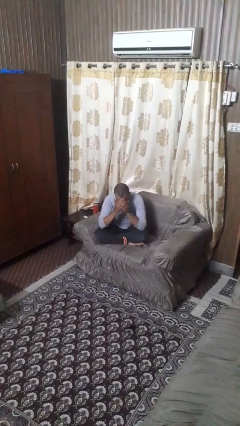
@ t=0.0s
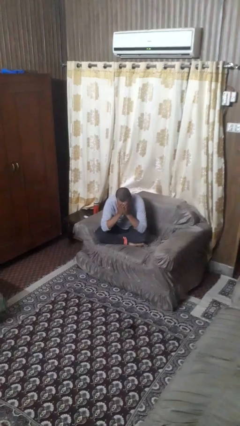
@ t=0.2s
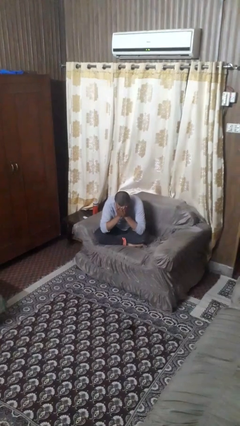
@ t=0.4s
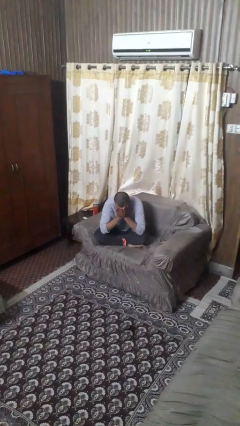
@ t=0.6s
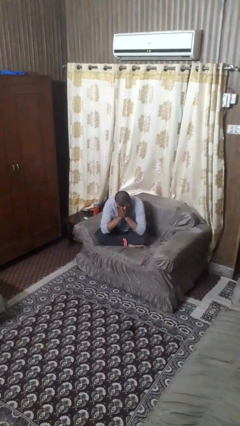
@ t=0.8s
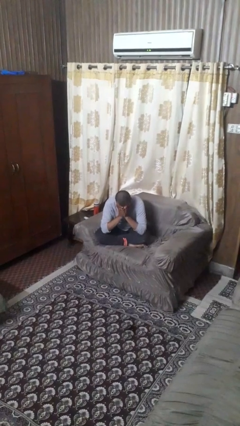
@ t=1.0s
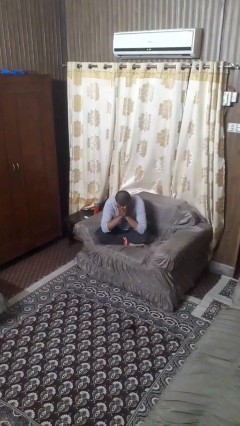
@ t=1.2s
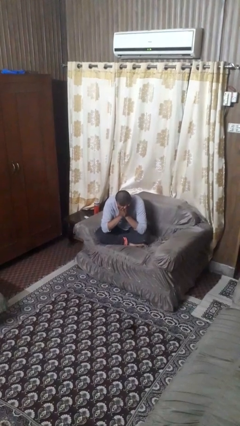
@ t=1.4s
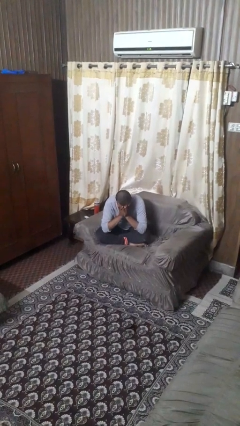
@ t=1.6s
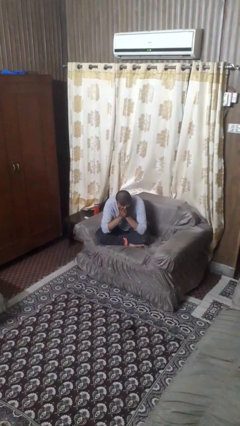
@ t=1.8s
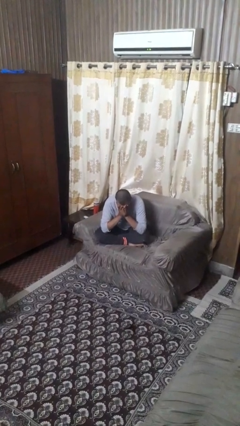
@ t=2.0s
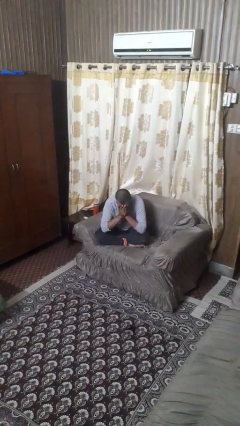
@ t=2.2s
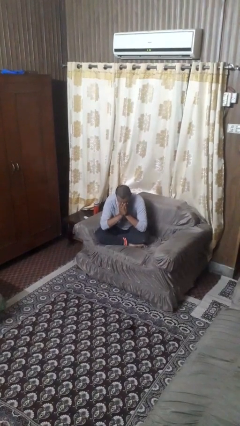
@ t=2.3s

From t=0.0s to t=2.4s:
person covers face with hands

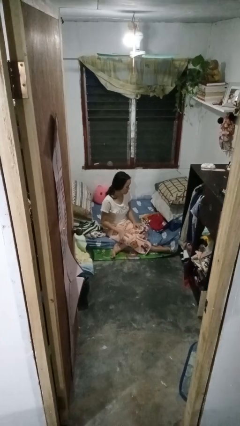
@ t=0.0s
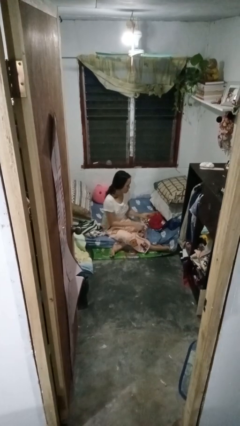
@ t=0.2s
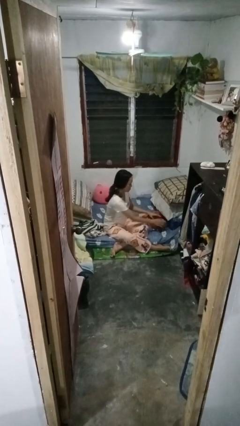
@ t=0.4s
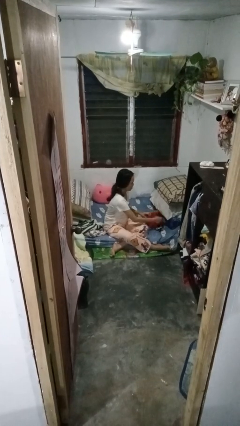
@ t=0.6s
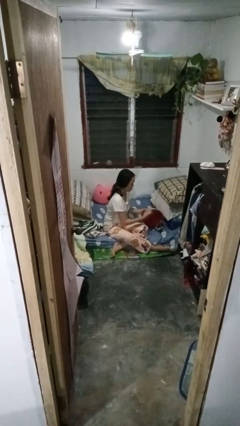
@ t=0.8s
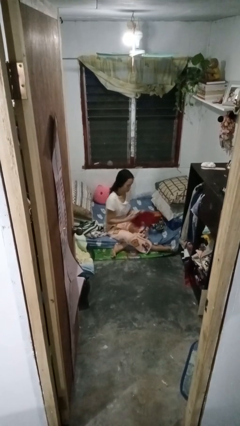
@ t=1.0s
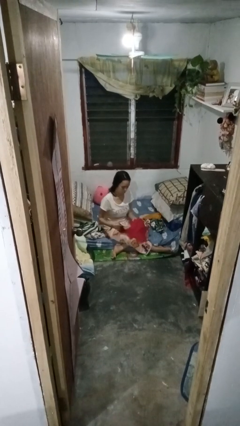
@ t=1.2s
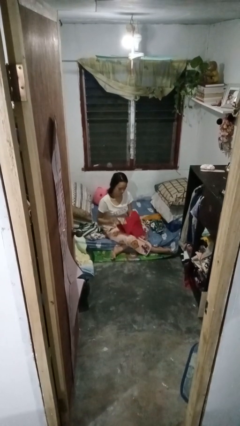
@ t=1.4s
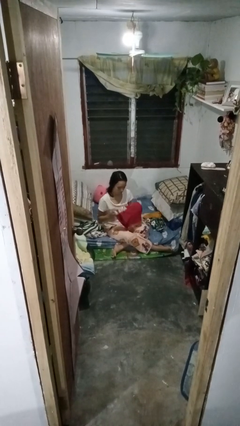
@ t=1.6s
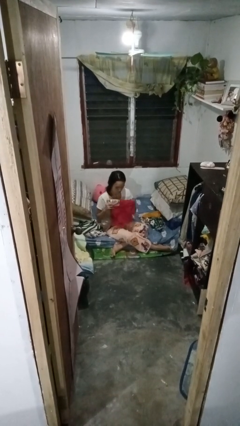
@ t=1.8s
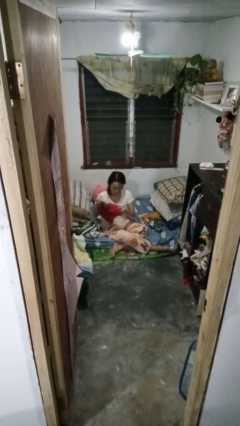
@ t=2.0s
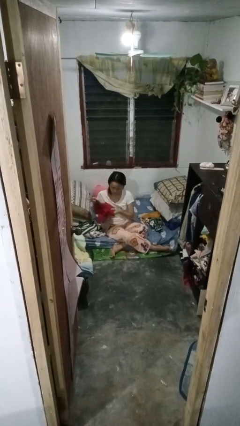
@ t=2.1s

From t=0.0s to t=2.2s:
person folds shirt

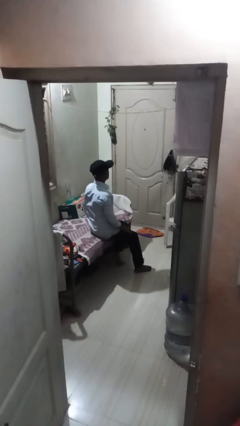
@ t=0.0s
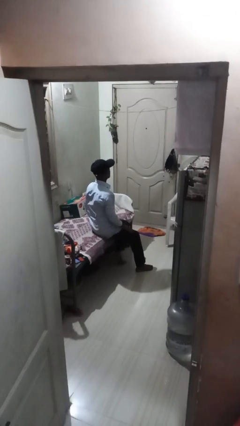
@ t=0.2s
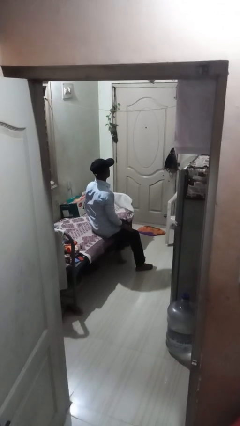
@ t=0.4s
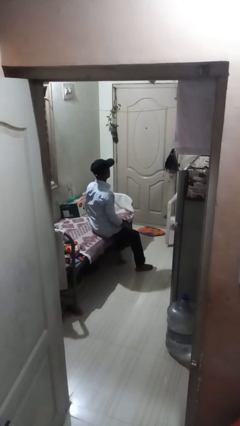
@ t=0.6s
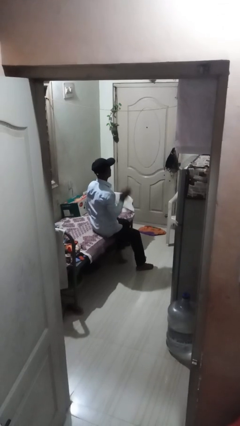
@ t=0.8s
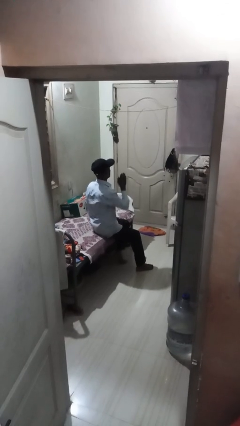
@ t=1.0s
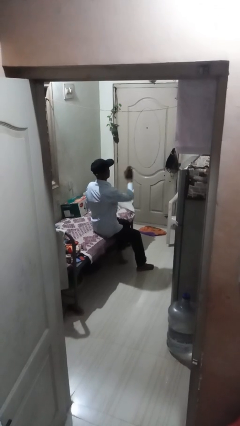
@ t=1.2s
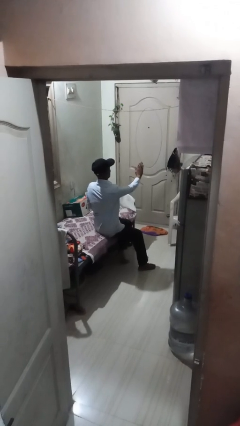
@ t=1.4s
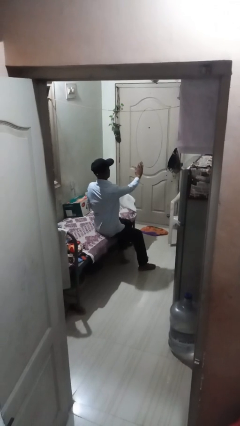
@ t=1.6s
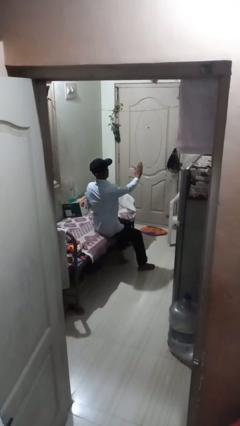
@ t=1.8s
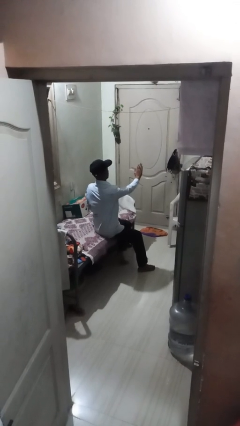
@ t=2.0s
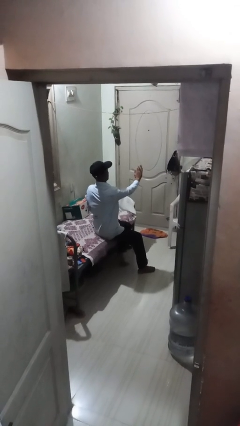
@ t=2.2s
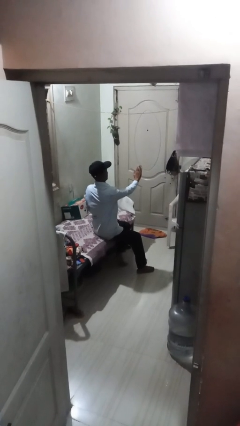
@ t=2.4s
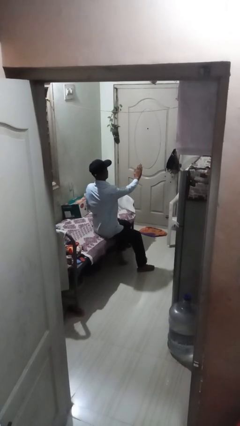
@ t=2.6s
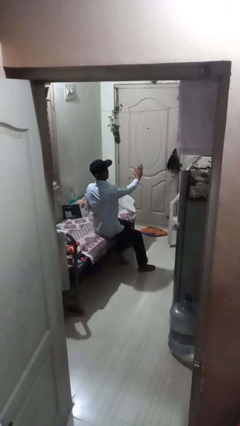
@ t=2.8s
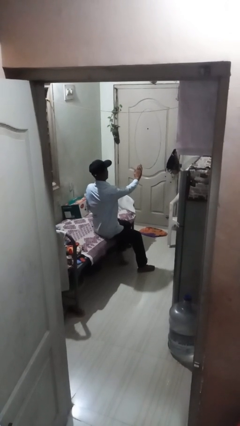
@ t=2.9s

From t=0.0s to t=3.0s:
person gestures stop

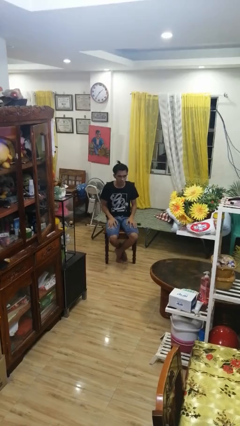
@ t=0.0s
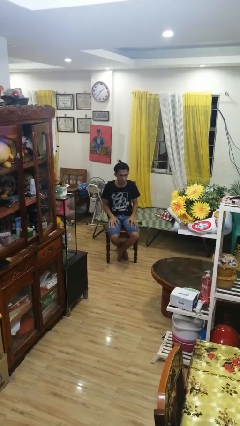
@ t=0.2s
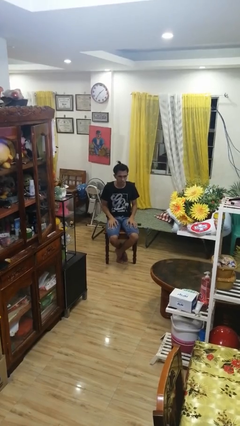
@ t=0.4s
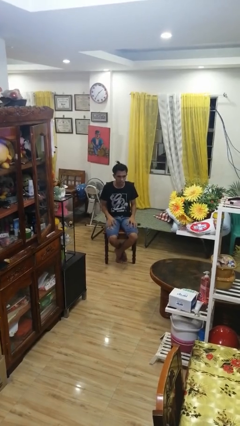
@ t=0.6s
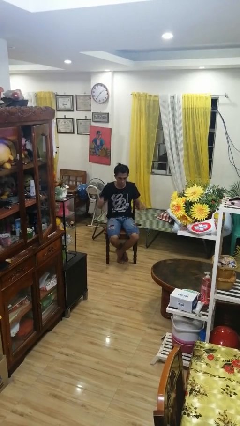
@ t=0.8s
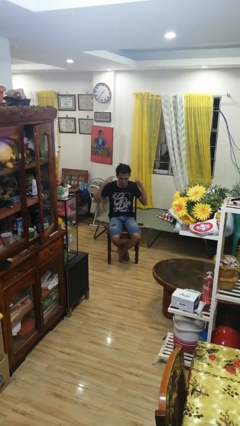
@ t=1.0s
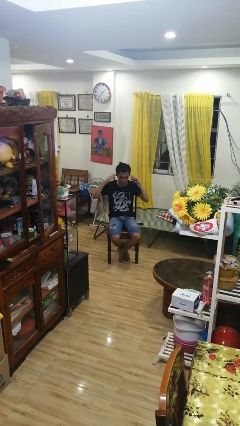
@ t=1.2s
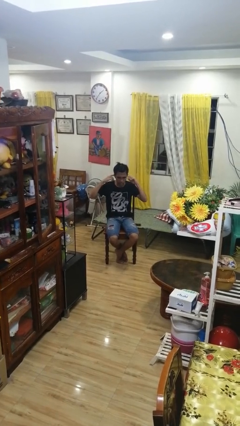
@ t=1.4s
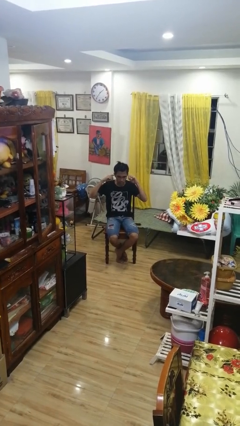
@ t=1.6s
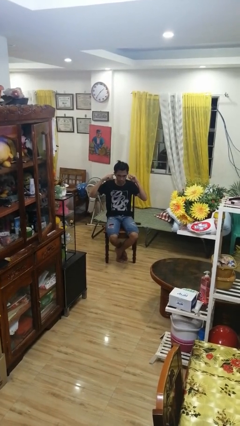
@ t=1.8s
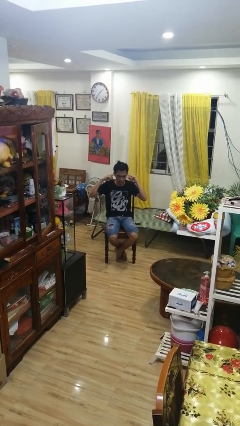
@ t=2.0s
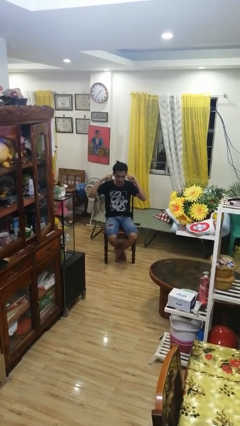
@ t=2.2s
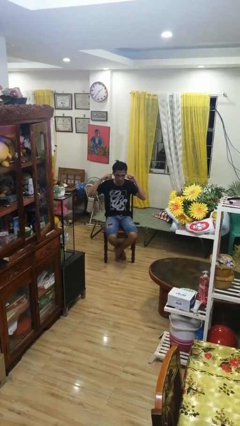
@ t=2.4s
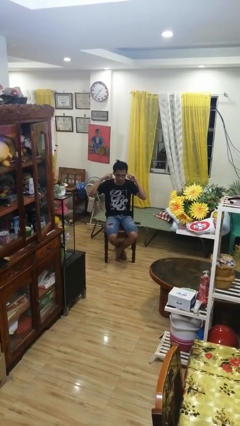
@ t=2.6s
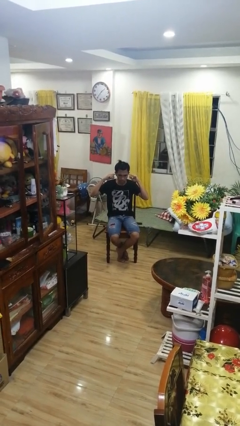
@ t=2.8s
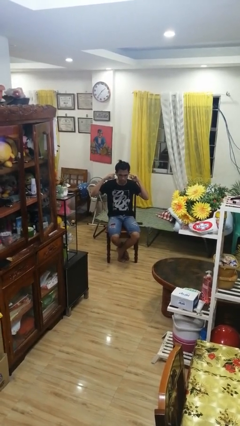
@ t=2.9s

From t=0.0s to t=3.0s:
person puts fingers in ear

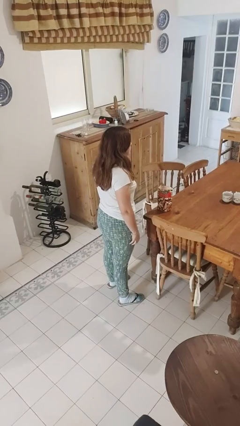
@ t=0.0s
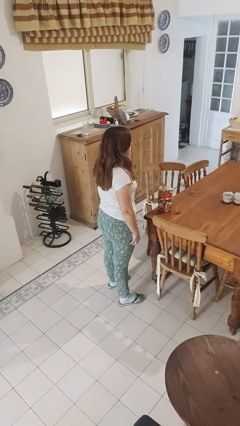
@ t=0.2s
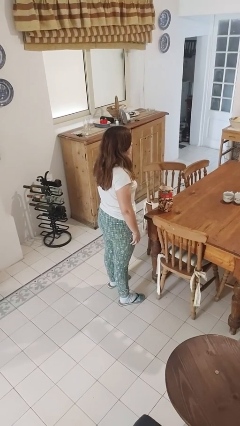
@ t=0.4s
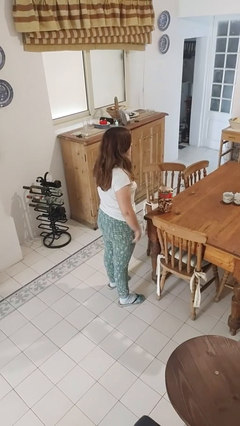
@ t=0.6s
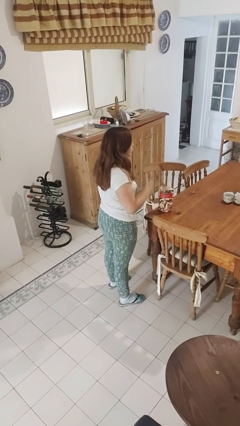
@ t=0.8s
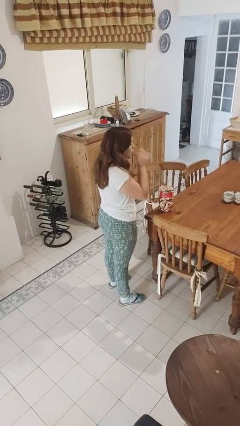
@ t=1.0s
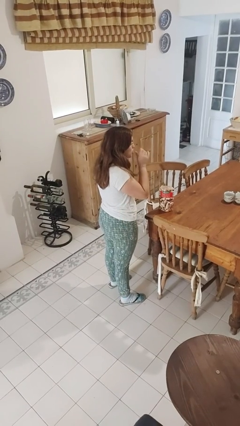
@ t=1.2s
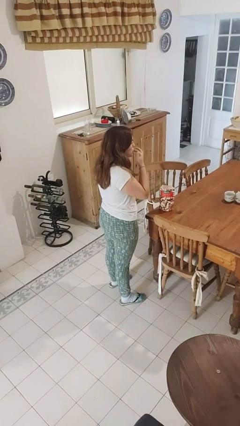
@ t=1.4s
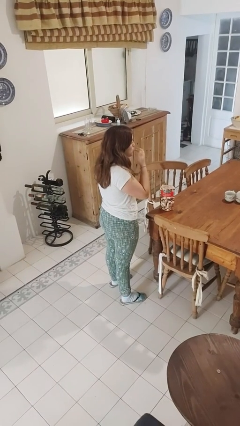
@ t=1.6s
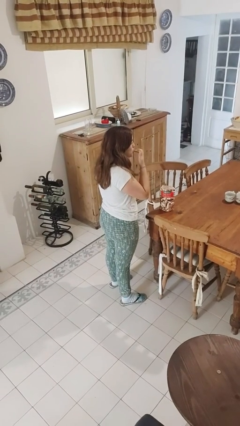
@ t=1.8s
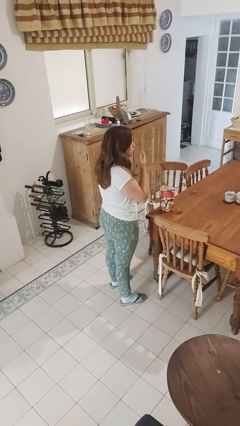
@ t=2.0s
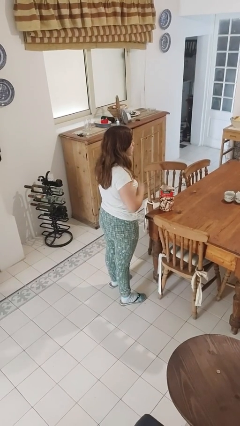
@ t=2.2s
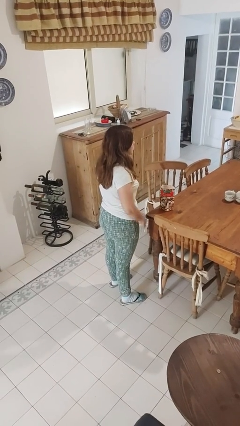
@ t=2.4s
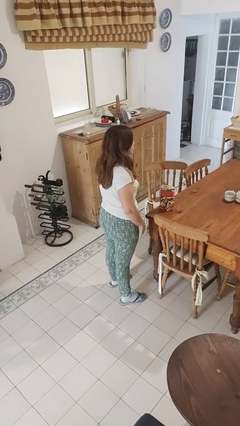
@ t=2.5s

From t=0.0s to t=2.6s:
person licks fingers

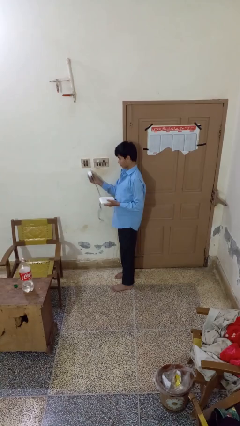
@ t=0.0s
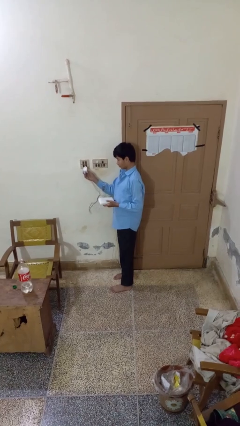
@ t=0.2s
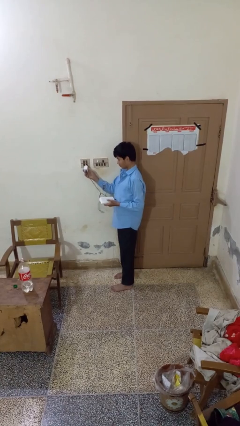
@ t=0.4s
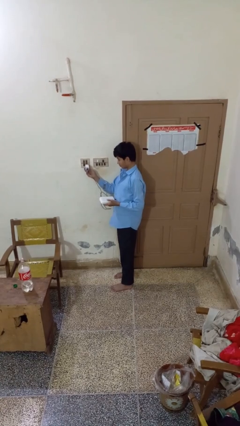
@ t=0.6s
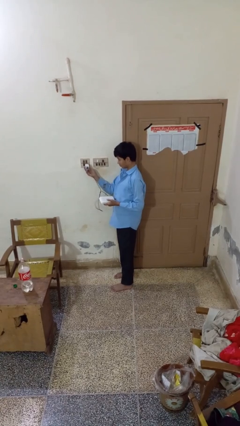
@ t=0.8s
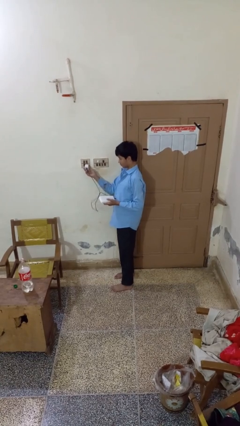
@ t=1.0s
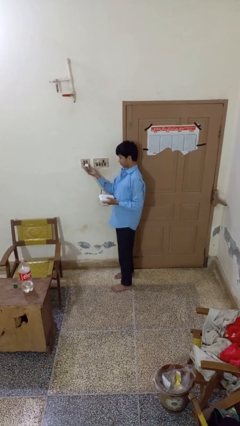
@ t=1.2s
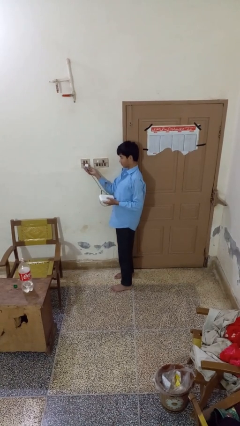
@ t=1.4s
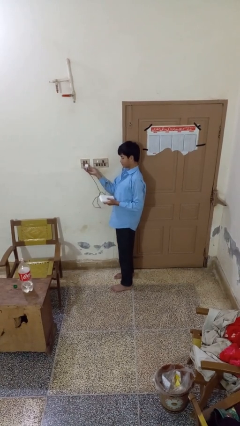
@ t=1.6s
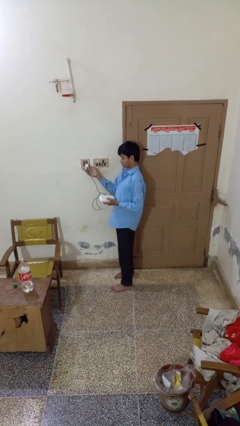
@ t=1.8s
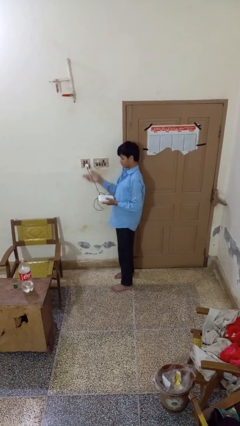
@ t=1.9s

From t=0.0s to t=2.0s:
person plugs into electrical socket

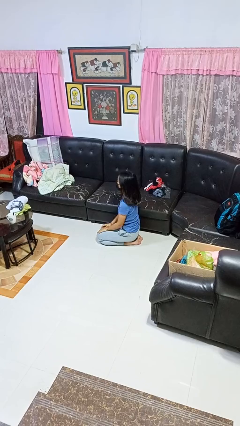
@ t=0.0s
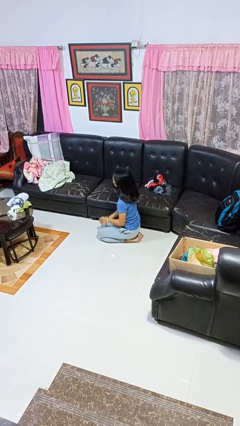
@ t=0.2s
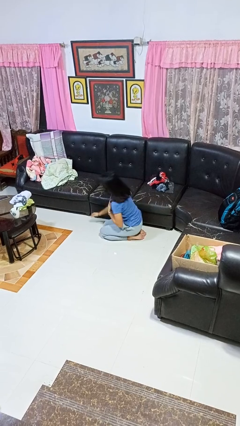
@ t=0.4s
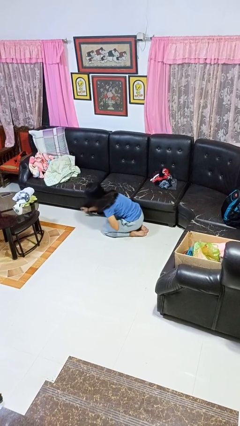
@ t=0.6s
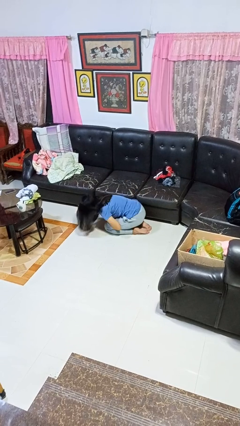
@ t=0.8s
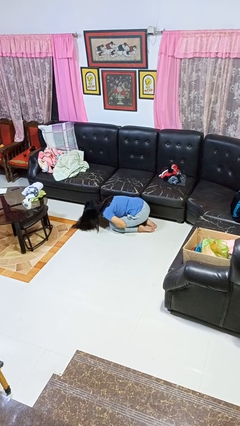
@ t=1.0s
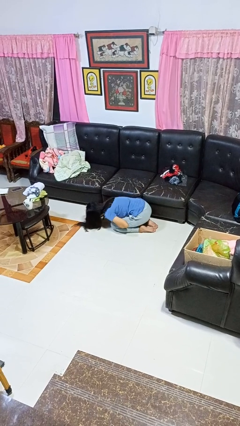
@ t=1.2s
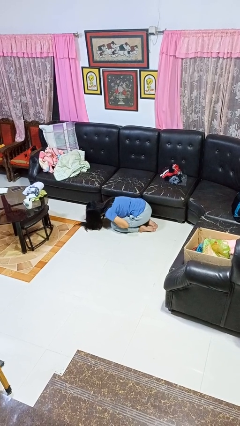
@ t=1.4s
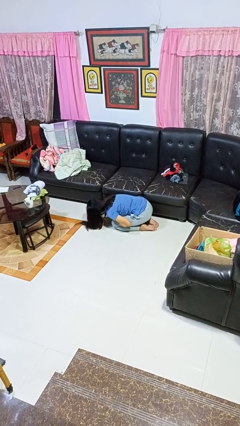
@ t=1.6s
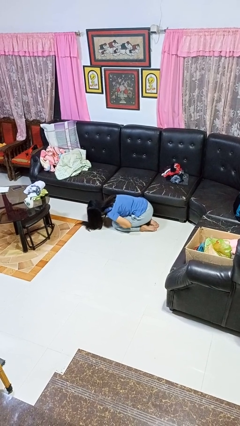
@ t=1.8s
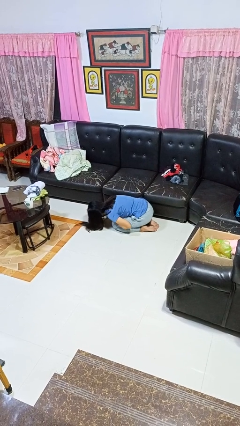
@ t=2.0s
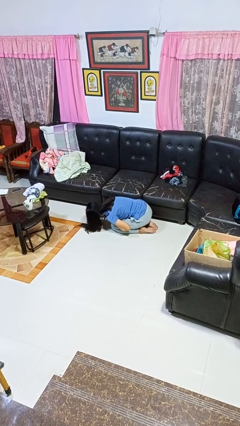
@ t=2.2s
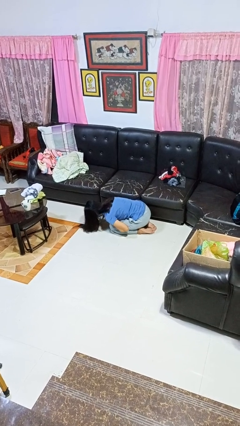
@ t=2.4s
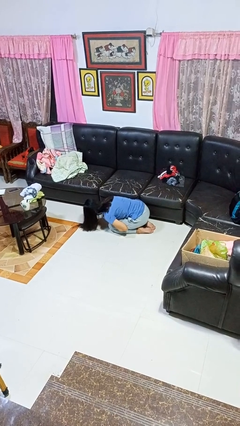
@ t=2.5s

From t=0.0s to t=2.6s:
person searches under couch
